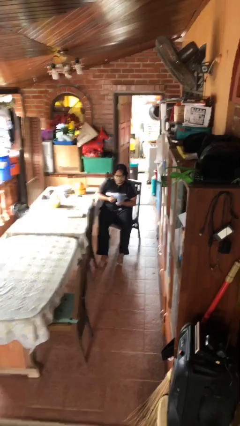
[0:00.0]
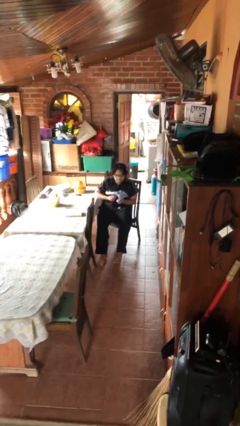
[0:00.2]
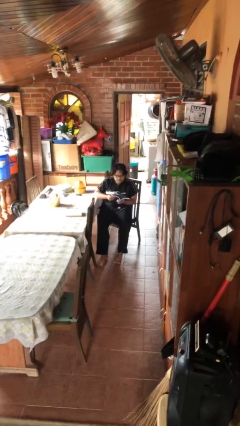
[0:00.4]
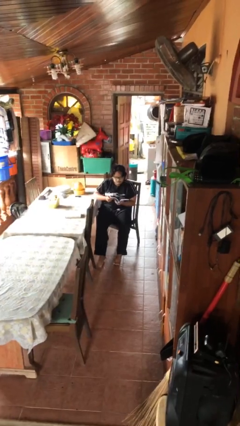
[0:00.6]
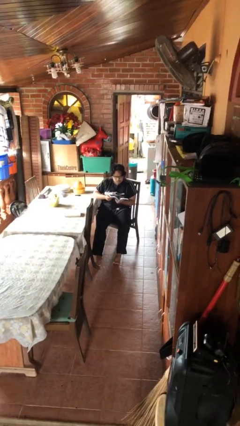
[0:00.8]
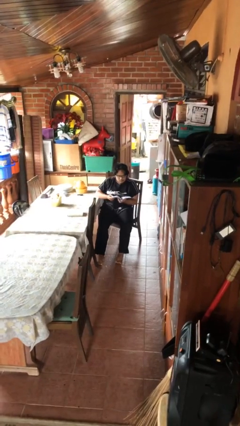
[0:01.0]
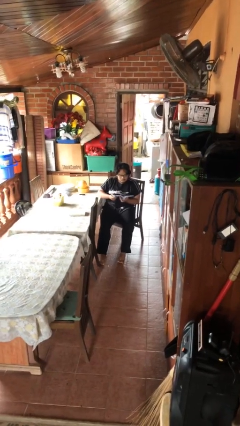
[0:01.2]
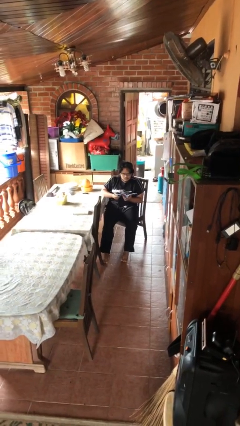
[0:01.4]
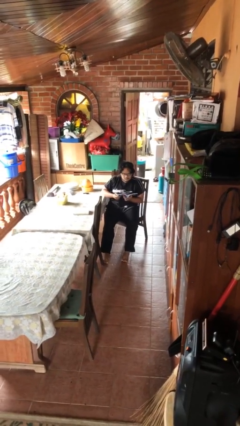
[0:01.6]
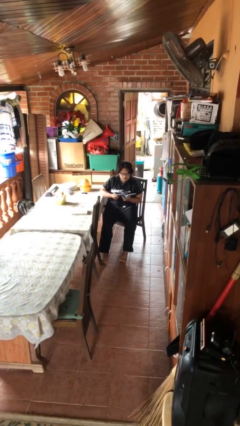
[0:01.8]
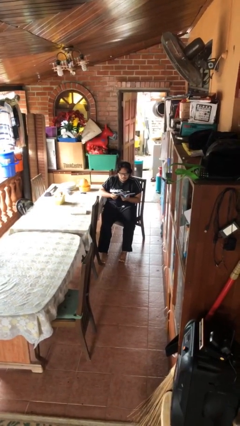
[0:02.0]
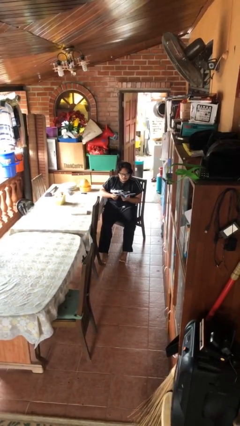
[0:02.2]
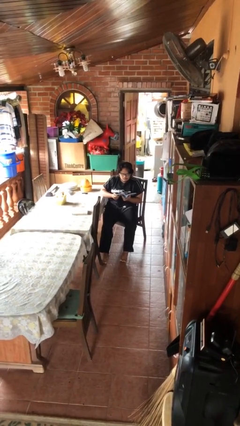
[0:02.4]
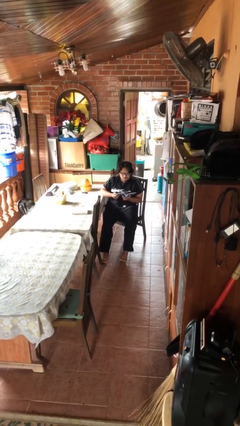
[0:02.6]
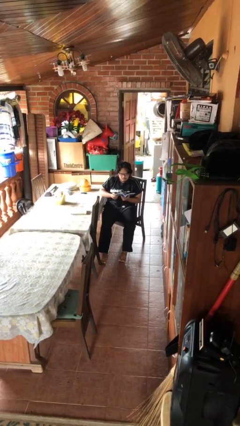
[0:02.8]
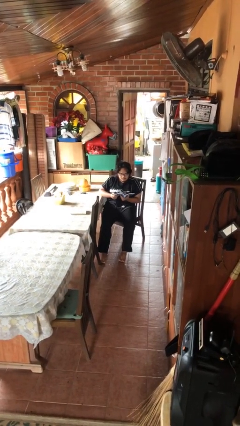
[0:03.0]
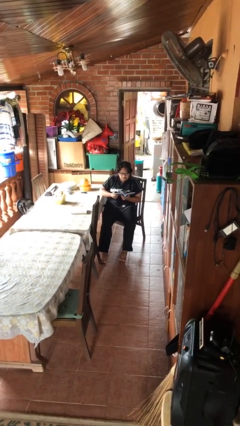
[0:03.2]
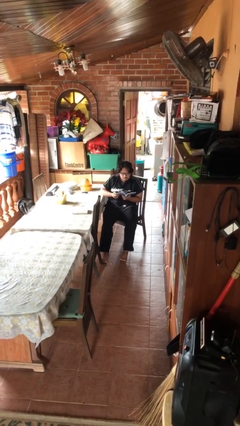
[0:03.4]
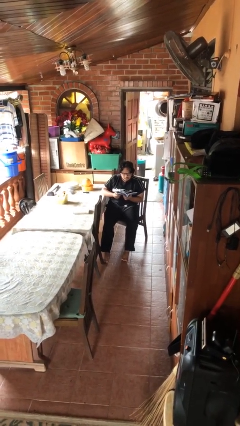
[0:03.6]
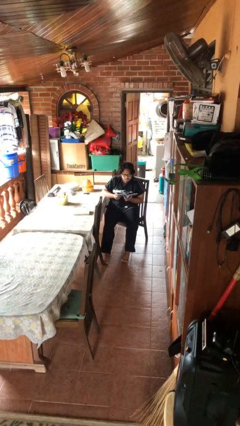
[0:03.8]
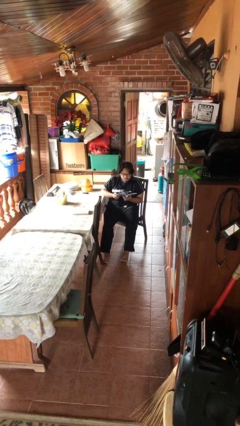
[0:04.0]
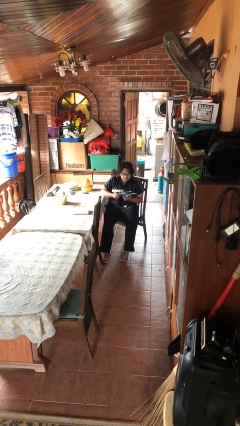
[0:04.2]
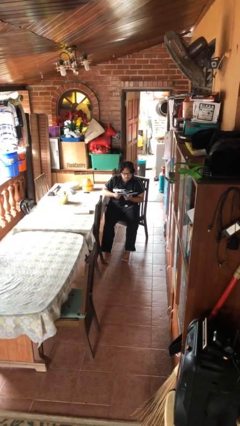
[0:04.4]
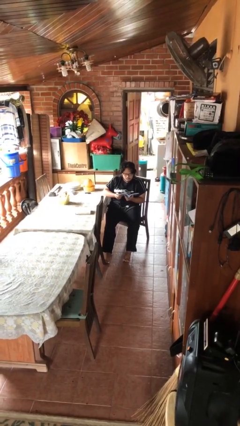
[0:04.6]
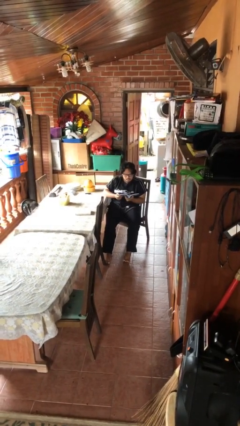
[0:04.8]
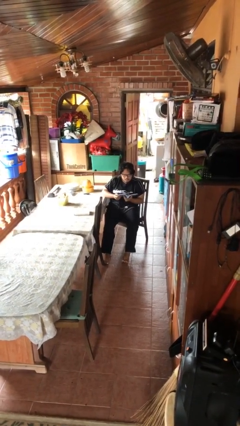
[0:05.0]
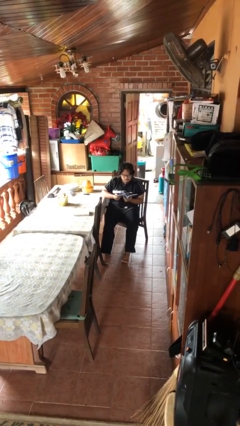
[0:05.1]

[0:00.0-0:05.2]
person reads document

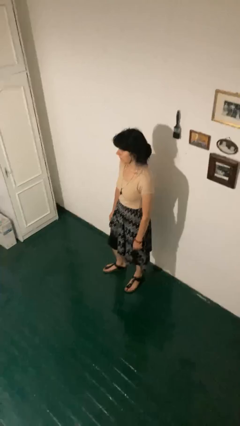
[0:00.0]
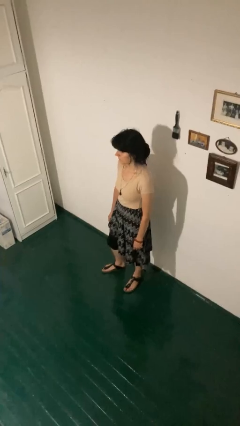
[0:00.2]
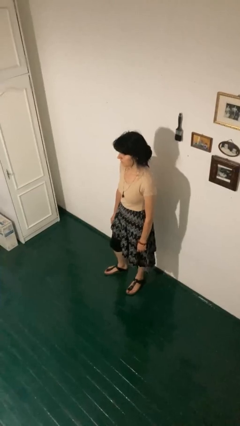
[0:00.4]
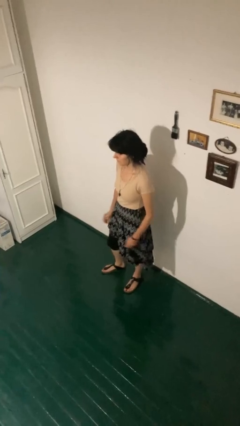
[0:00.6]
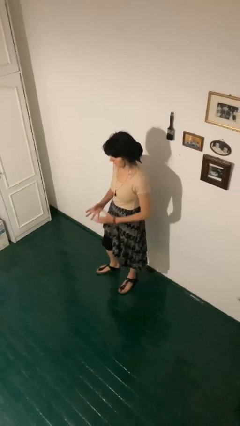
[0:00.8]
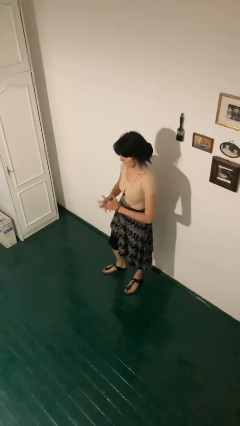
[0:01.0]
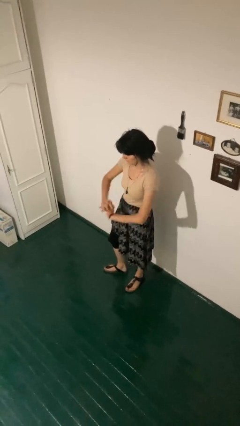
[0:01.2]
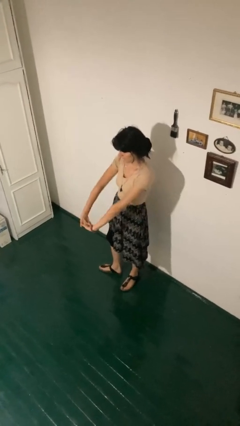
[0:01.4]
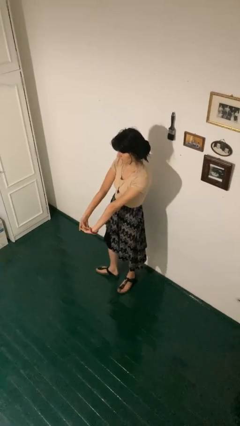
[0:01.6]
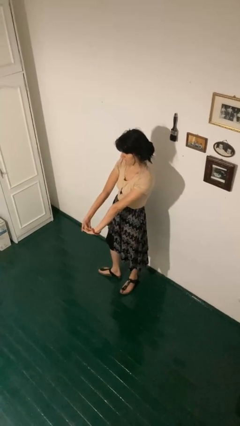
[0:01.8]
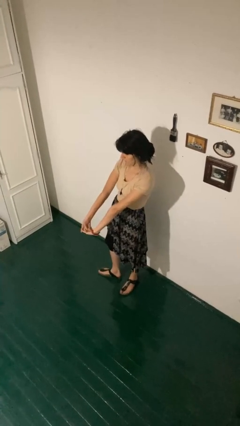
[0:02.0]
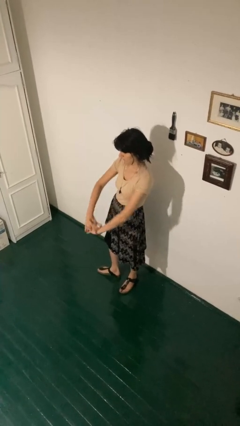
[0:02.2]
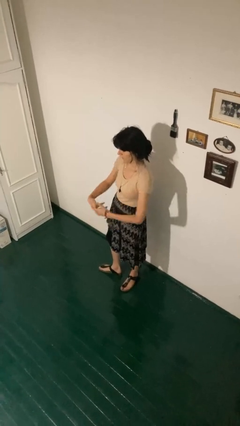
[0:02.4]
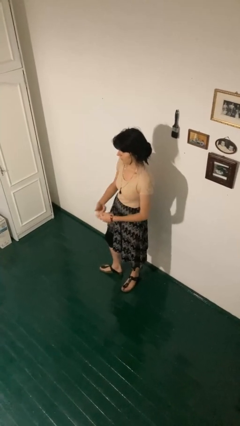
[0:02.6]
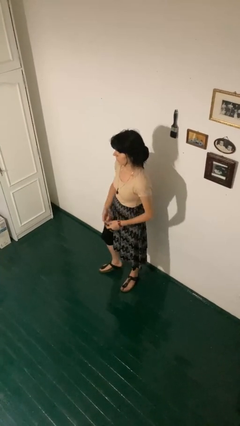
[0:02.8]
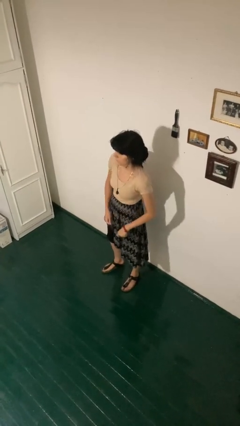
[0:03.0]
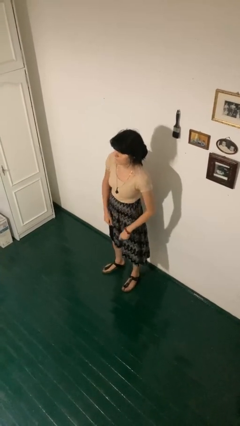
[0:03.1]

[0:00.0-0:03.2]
person cracks knuckles

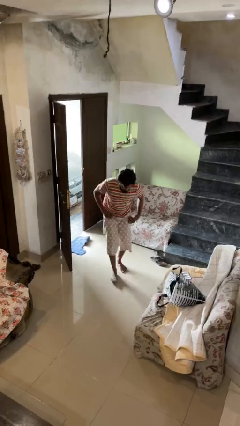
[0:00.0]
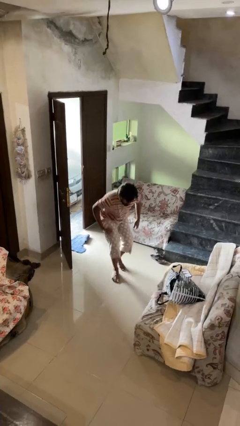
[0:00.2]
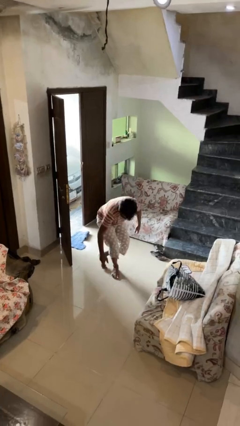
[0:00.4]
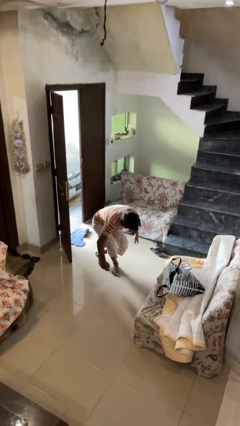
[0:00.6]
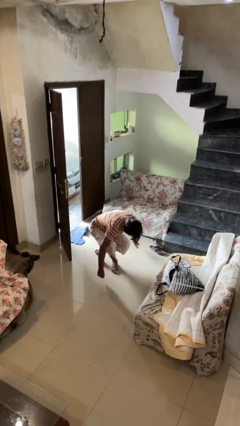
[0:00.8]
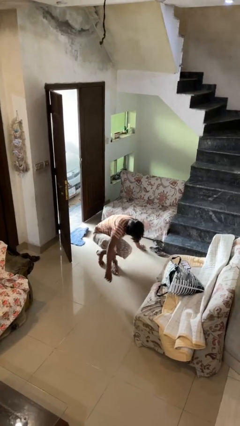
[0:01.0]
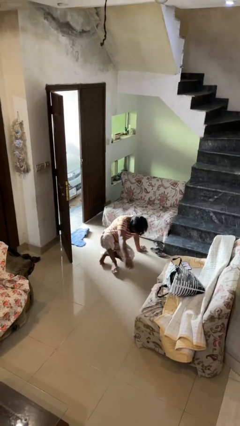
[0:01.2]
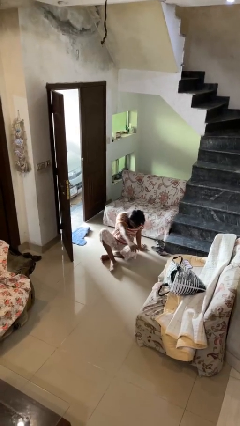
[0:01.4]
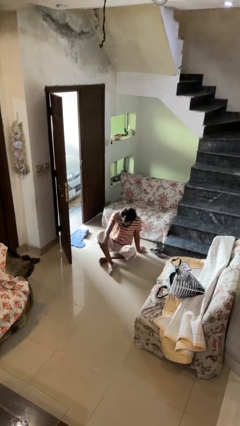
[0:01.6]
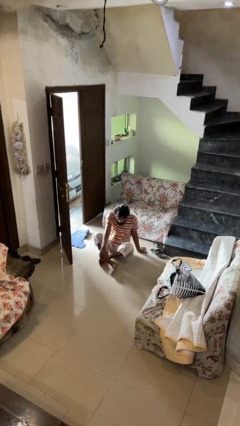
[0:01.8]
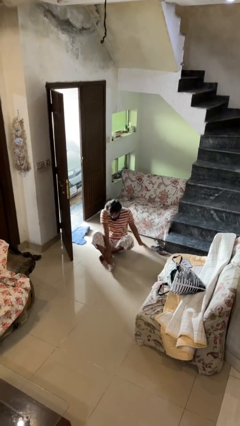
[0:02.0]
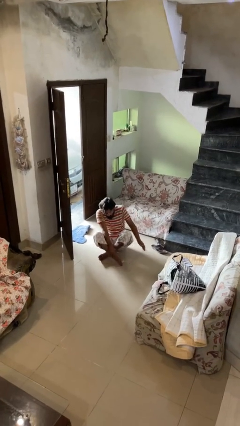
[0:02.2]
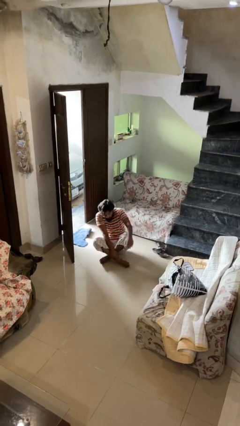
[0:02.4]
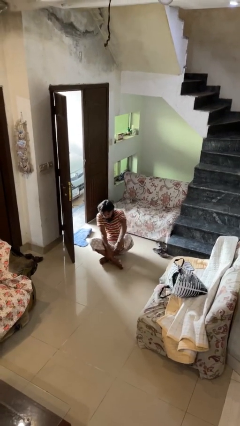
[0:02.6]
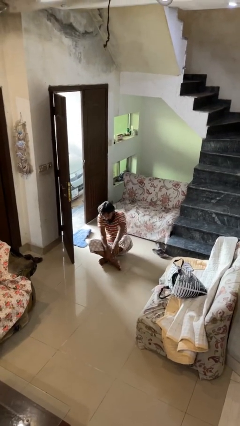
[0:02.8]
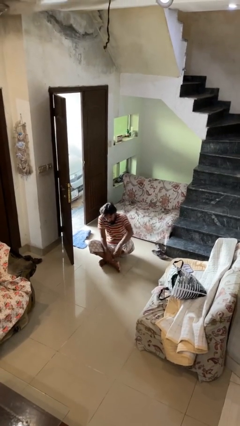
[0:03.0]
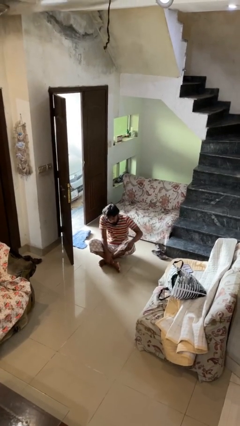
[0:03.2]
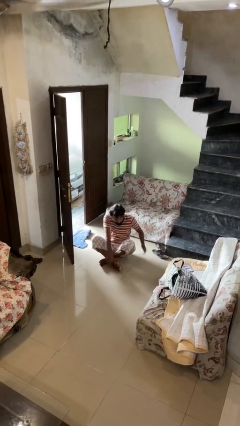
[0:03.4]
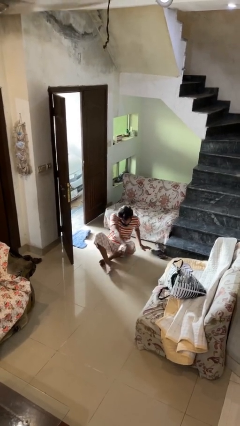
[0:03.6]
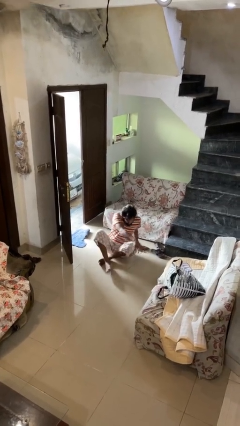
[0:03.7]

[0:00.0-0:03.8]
person sits crisscross

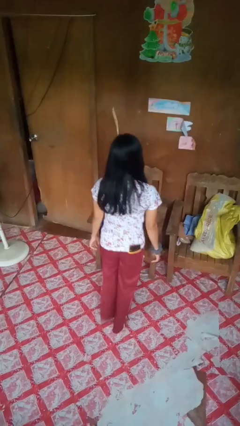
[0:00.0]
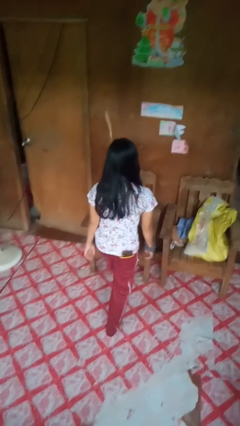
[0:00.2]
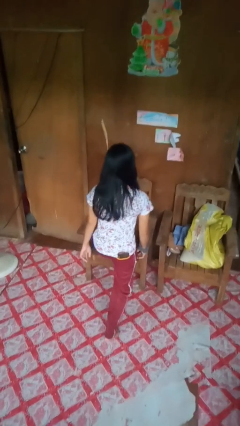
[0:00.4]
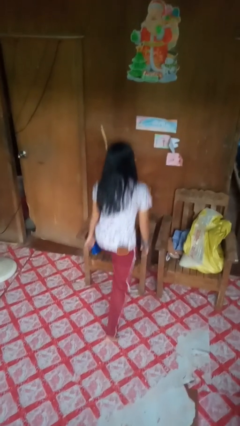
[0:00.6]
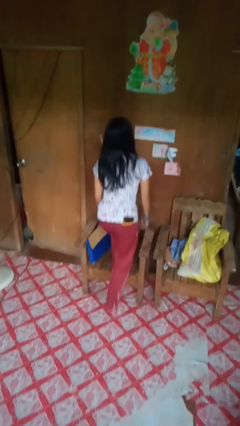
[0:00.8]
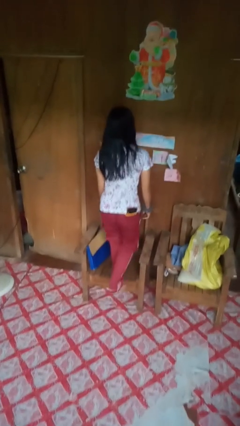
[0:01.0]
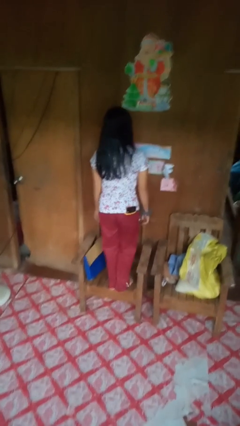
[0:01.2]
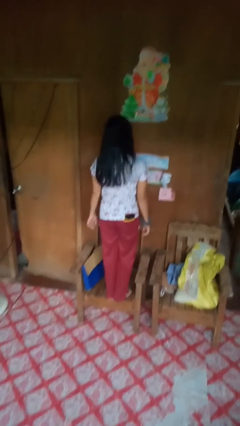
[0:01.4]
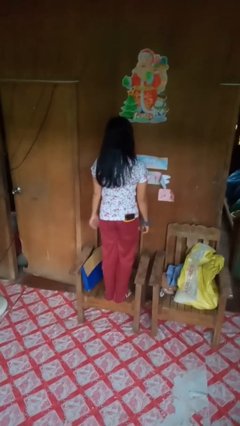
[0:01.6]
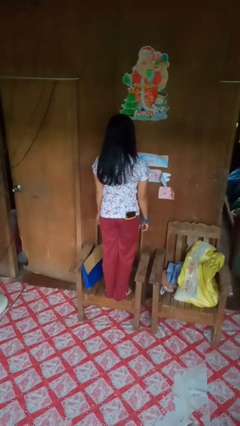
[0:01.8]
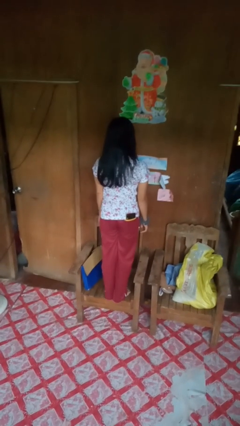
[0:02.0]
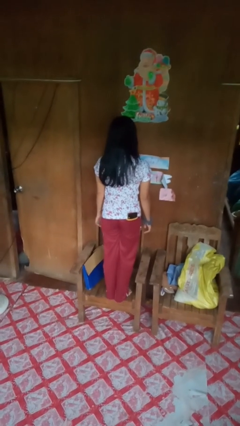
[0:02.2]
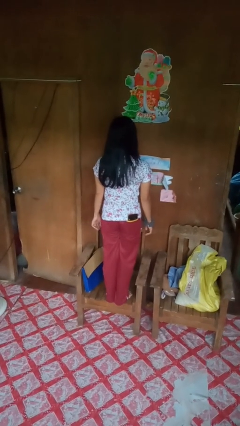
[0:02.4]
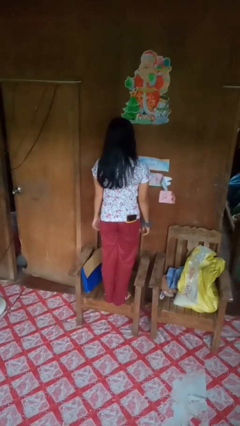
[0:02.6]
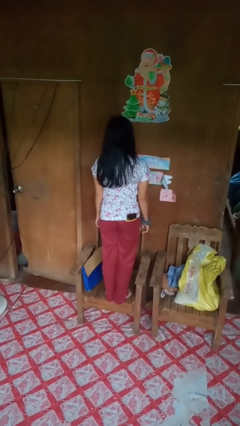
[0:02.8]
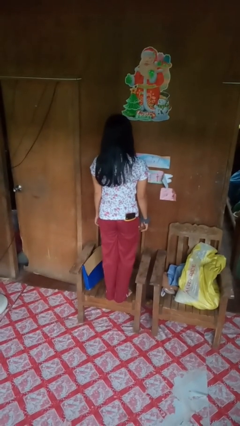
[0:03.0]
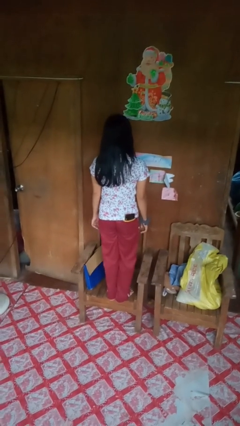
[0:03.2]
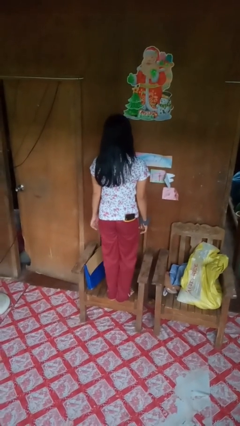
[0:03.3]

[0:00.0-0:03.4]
person climbs on chair

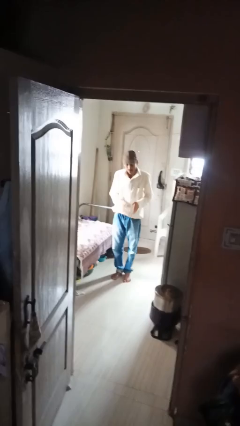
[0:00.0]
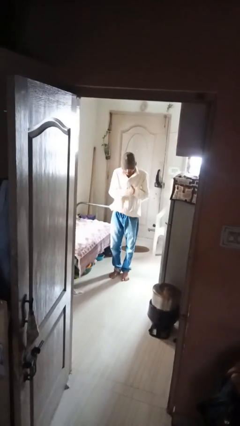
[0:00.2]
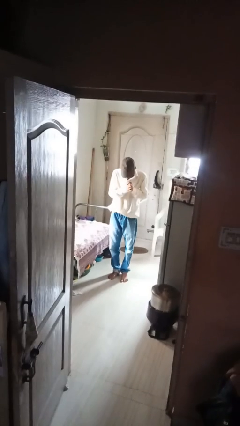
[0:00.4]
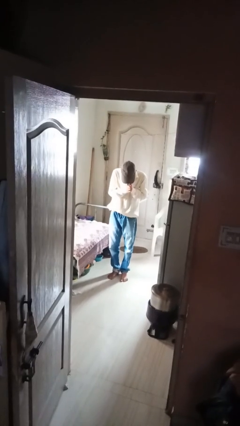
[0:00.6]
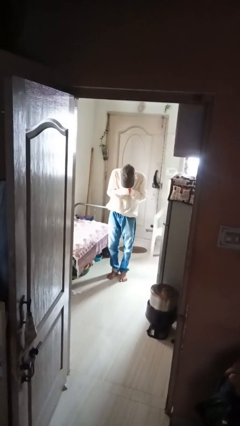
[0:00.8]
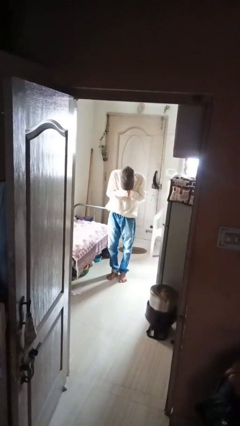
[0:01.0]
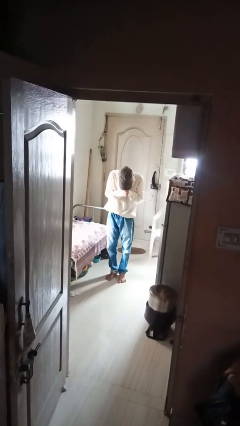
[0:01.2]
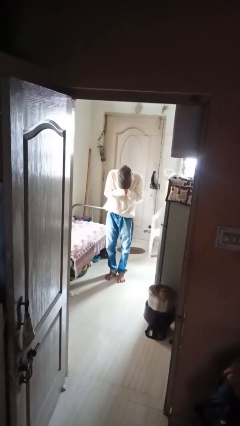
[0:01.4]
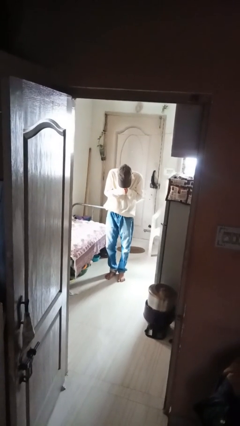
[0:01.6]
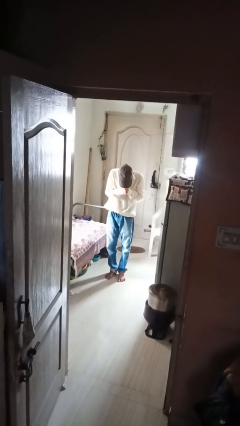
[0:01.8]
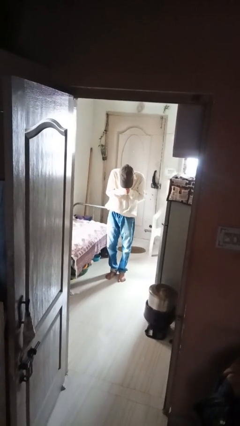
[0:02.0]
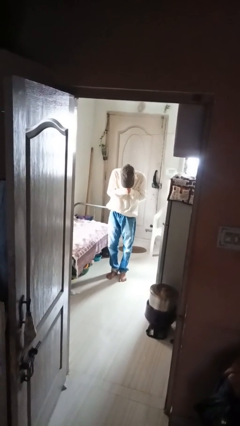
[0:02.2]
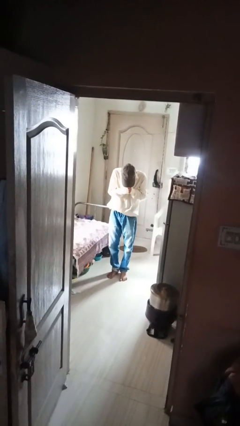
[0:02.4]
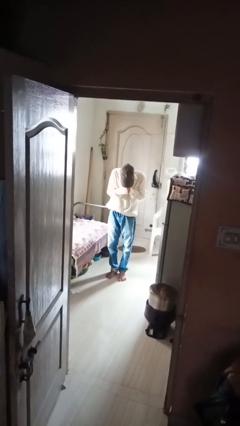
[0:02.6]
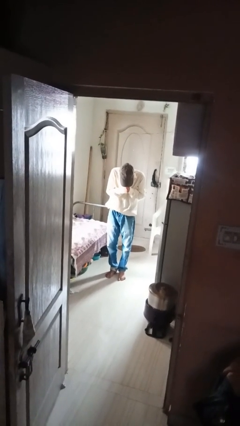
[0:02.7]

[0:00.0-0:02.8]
person prays
